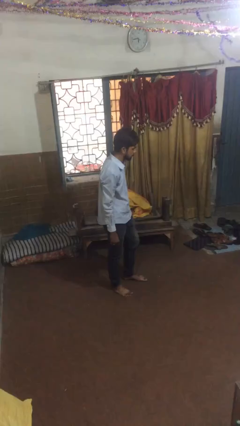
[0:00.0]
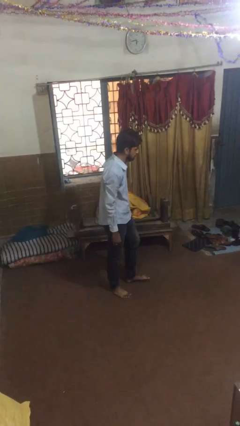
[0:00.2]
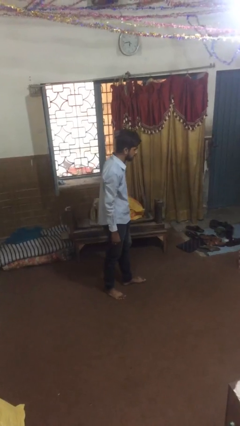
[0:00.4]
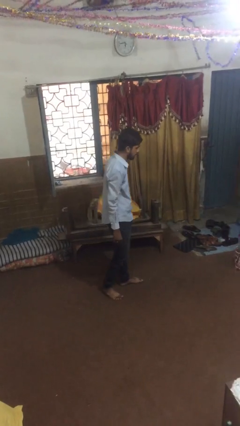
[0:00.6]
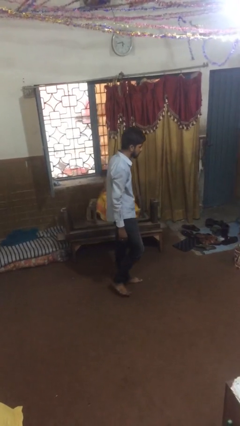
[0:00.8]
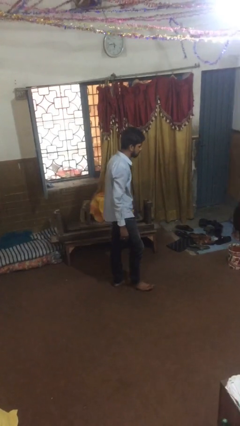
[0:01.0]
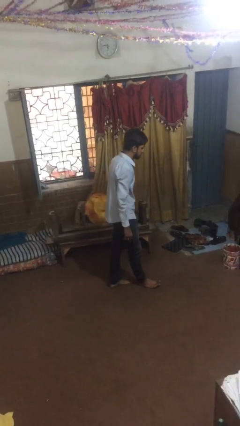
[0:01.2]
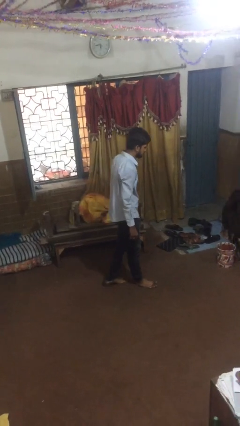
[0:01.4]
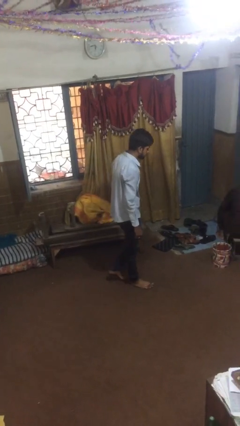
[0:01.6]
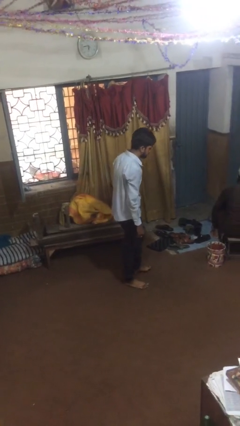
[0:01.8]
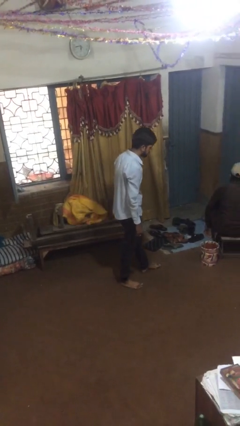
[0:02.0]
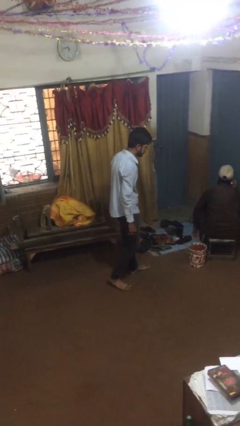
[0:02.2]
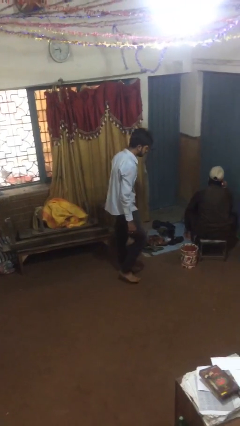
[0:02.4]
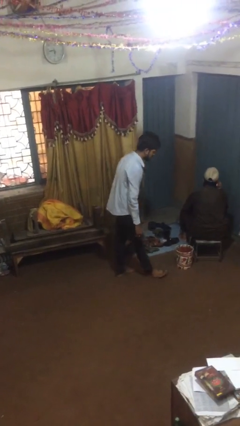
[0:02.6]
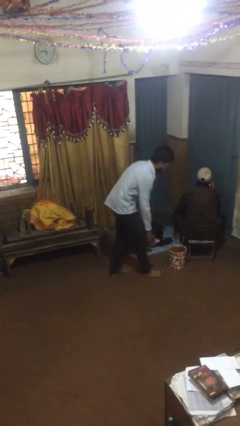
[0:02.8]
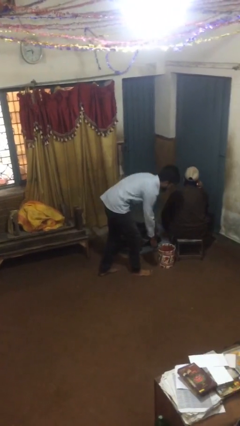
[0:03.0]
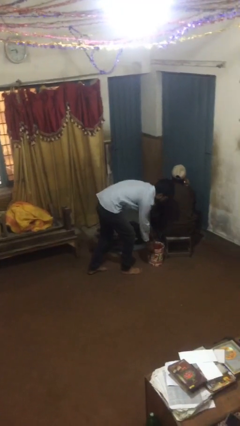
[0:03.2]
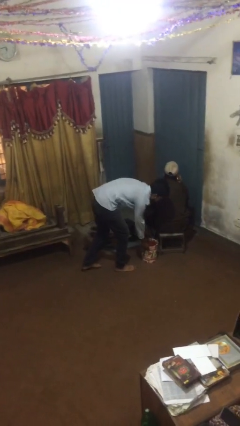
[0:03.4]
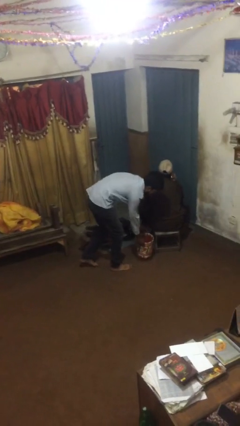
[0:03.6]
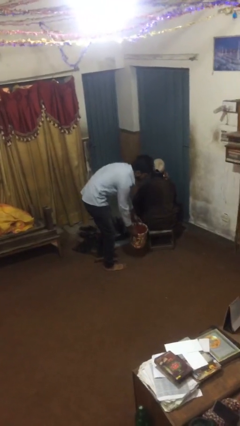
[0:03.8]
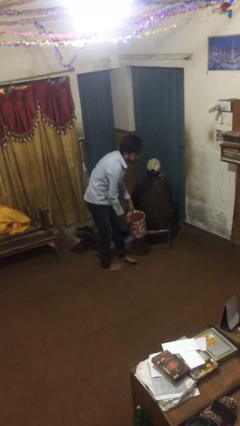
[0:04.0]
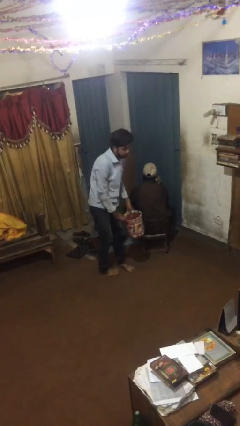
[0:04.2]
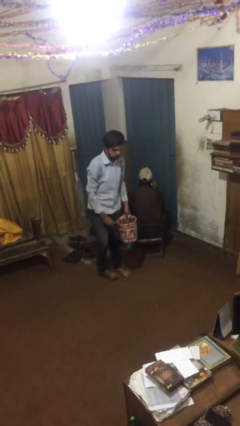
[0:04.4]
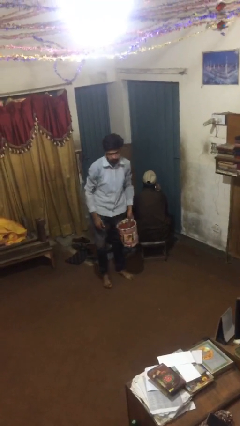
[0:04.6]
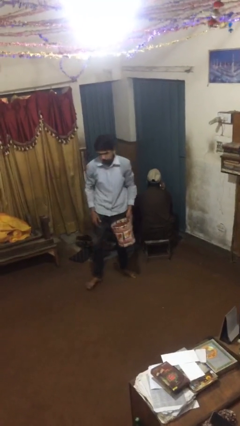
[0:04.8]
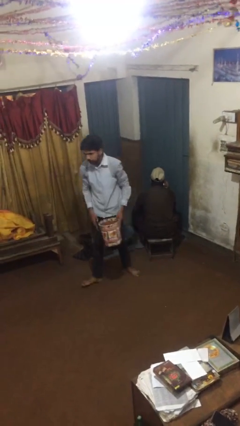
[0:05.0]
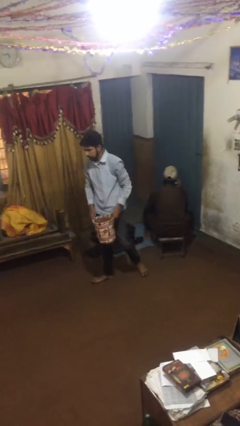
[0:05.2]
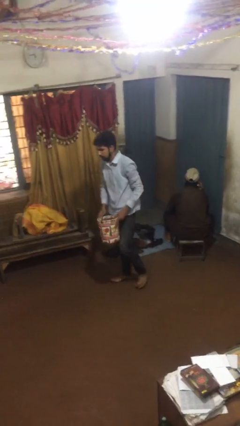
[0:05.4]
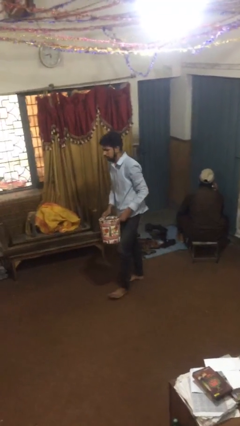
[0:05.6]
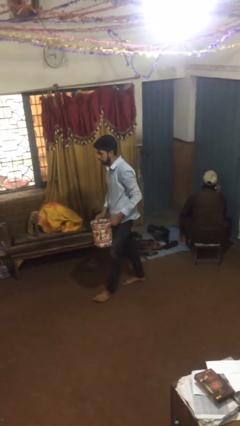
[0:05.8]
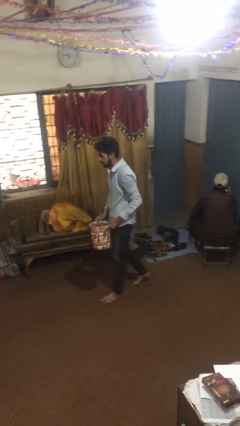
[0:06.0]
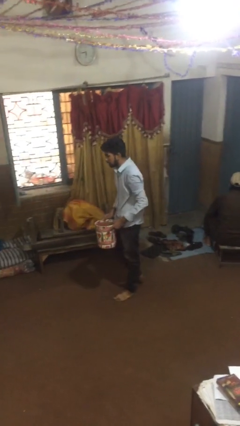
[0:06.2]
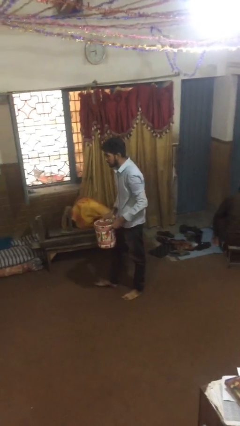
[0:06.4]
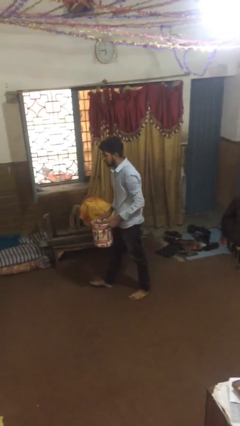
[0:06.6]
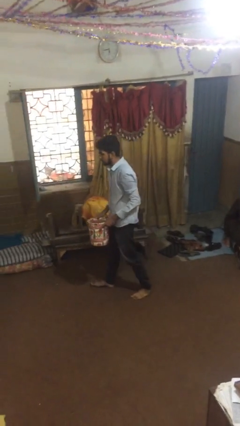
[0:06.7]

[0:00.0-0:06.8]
person steals object from person

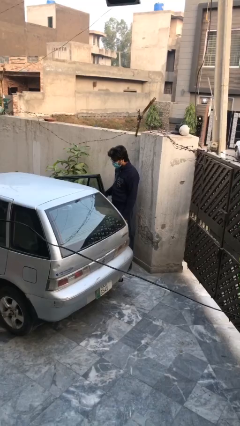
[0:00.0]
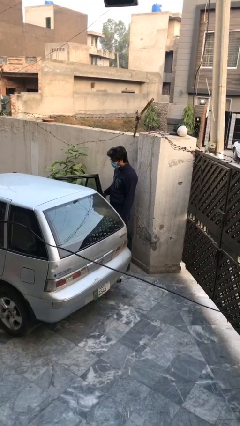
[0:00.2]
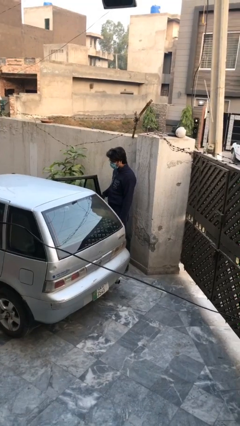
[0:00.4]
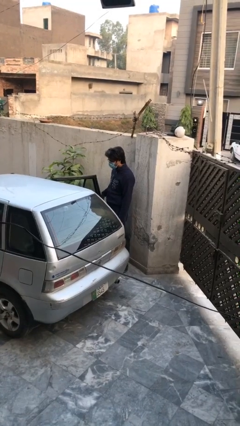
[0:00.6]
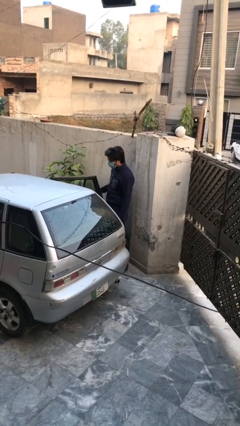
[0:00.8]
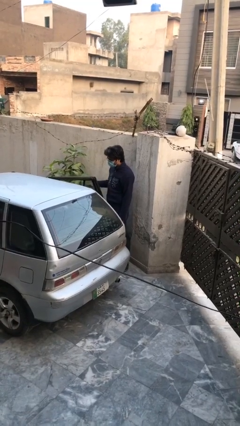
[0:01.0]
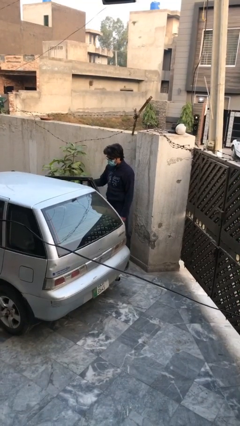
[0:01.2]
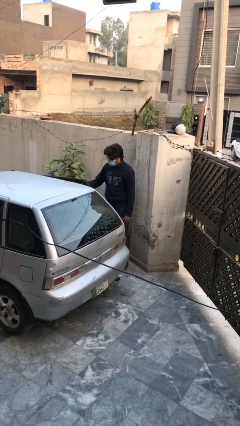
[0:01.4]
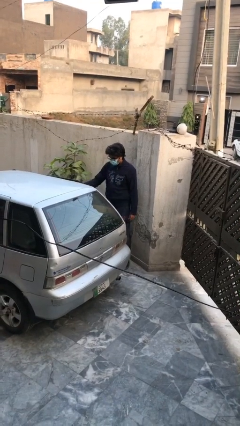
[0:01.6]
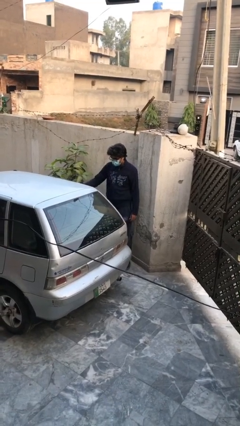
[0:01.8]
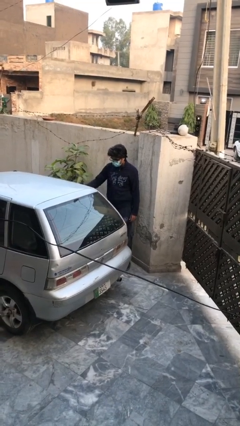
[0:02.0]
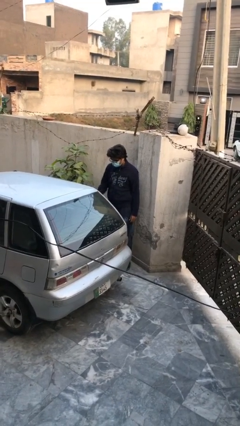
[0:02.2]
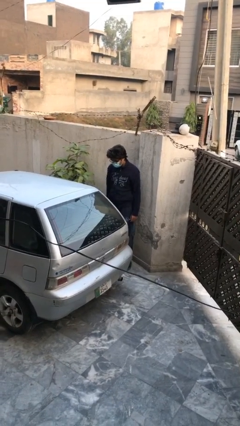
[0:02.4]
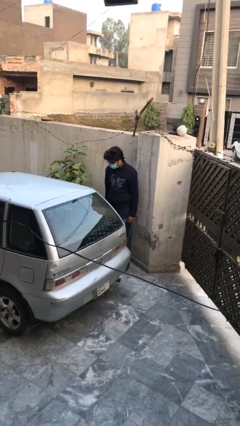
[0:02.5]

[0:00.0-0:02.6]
person closes car door

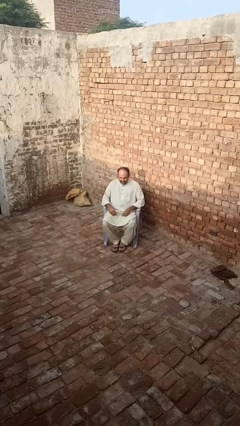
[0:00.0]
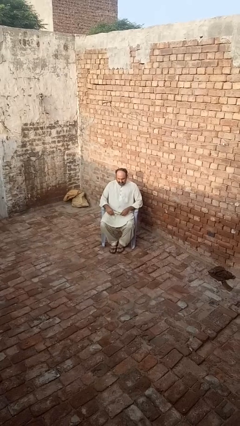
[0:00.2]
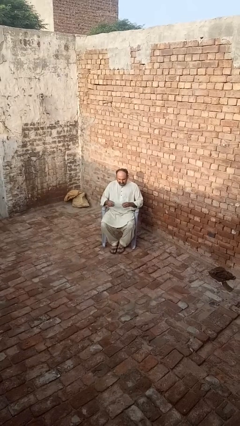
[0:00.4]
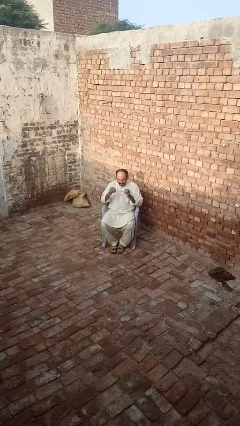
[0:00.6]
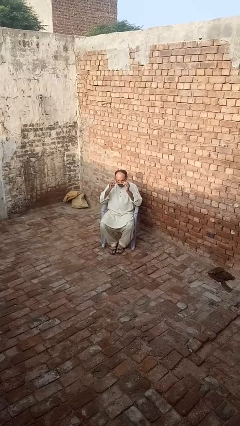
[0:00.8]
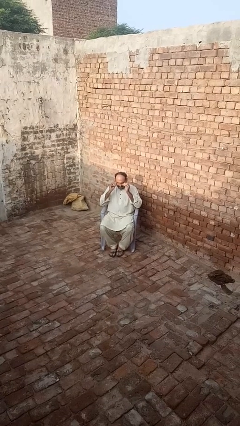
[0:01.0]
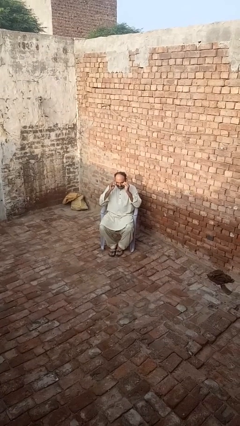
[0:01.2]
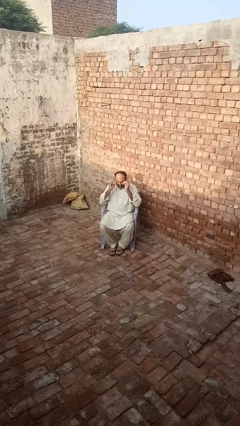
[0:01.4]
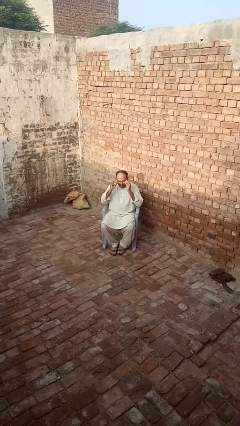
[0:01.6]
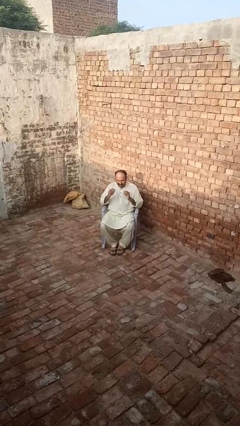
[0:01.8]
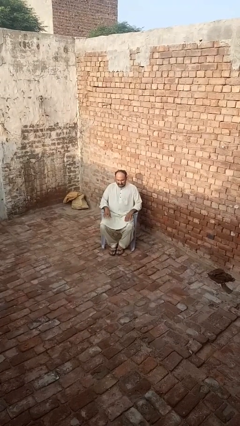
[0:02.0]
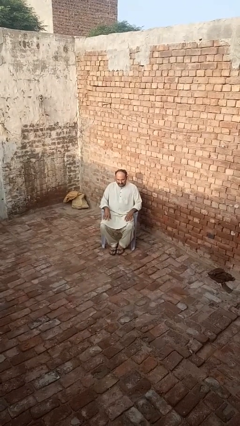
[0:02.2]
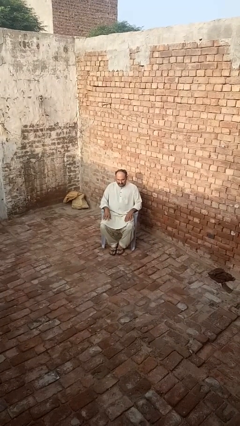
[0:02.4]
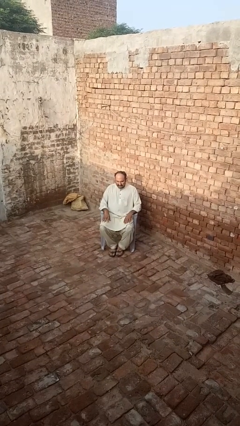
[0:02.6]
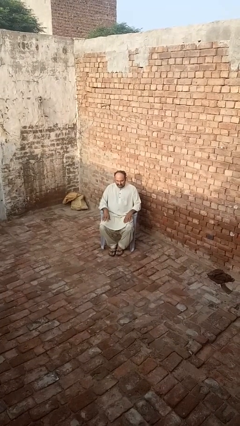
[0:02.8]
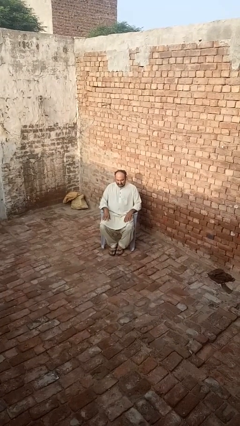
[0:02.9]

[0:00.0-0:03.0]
person puts on glasses

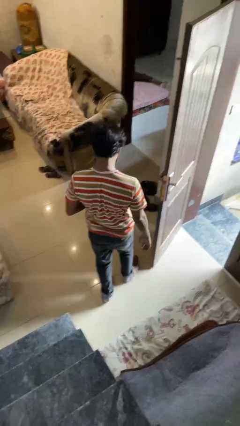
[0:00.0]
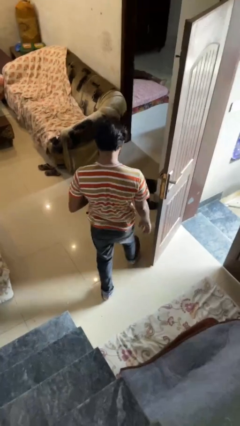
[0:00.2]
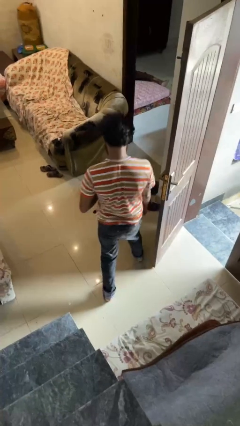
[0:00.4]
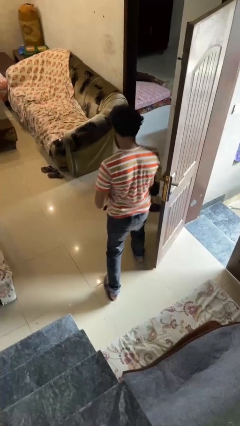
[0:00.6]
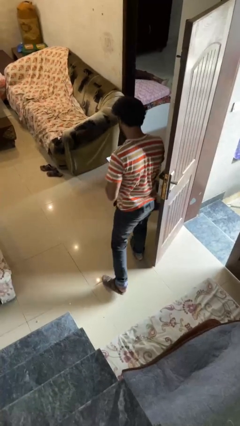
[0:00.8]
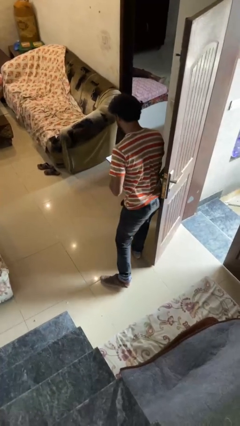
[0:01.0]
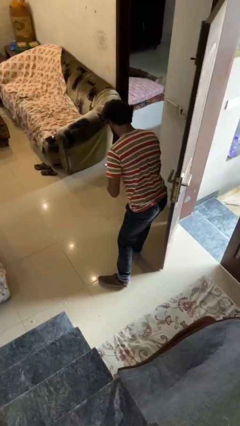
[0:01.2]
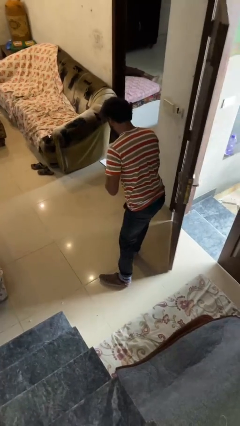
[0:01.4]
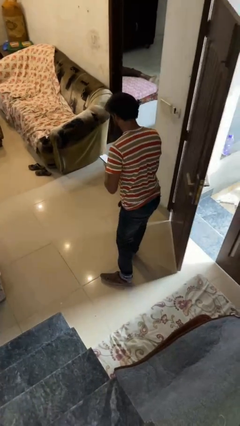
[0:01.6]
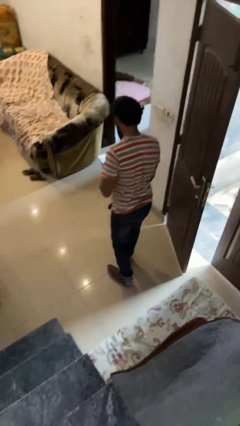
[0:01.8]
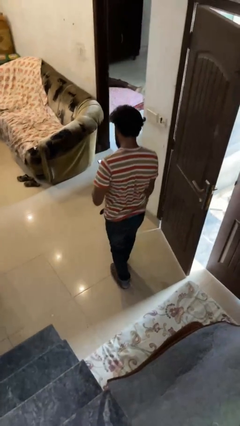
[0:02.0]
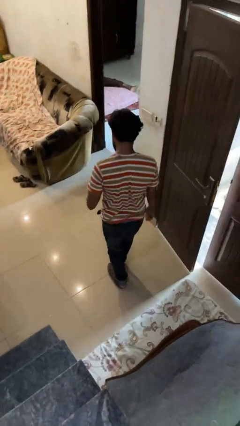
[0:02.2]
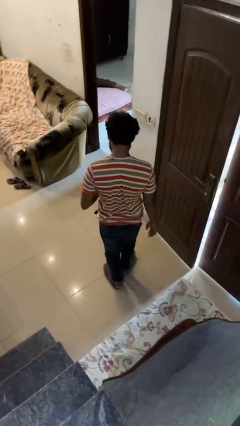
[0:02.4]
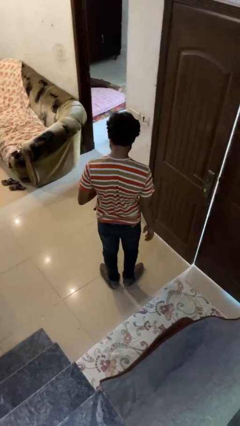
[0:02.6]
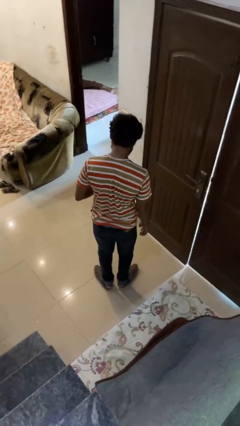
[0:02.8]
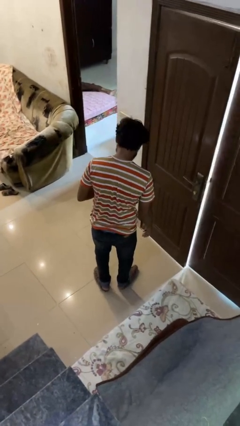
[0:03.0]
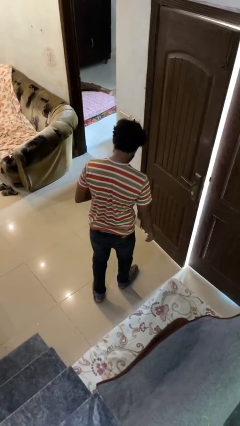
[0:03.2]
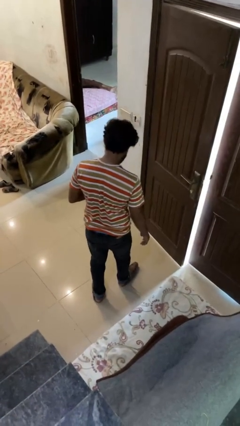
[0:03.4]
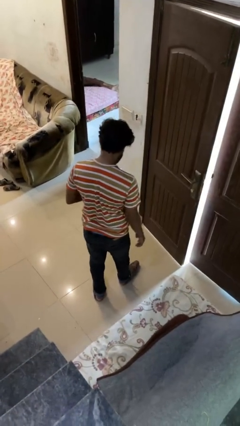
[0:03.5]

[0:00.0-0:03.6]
person closes door with hip

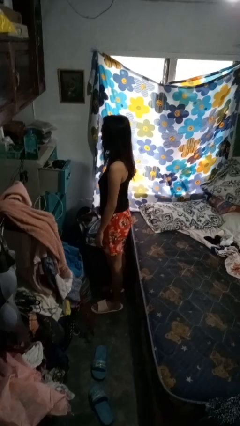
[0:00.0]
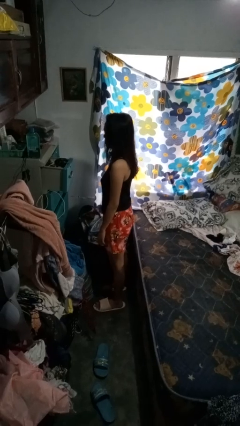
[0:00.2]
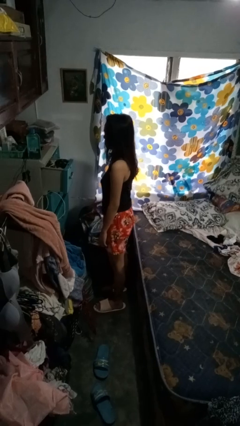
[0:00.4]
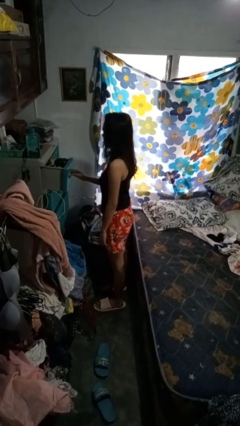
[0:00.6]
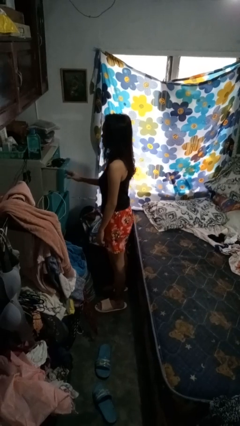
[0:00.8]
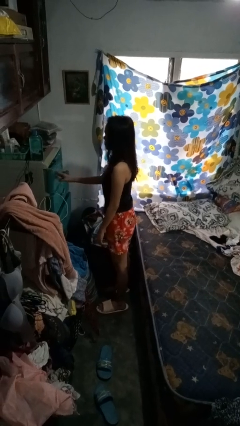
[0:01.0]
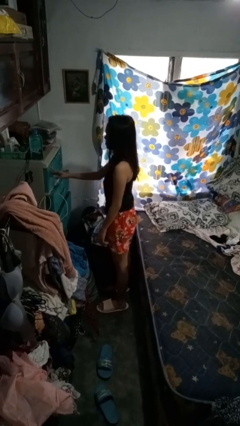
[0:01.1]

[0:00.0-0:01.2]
person closes dresser drawer

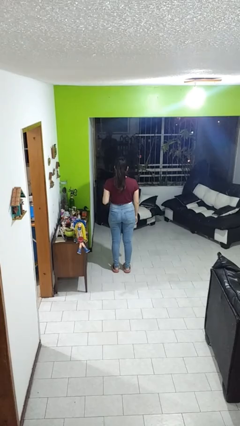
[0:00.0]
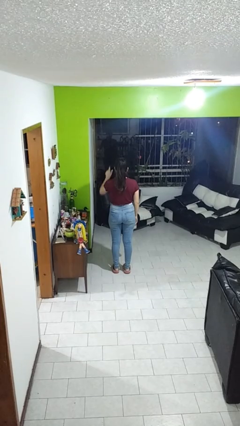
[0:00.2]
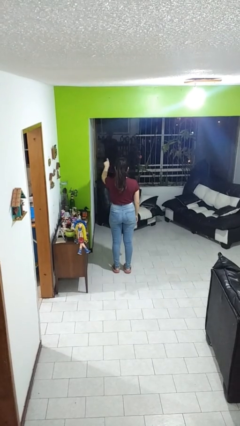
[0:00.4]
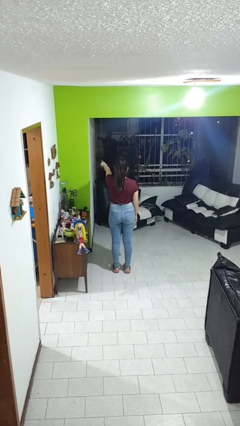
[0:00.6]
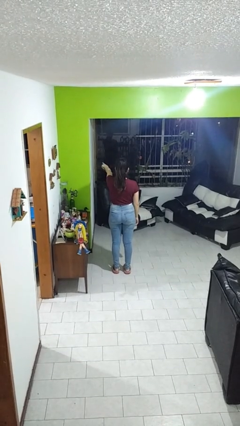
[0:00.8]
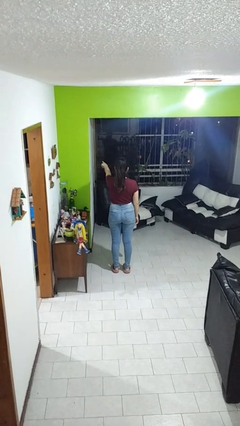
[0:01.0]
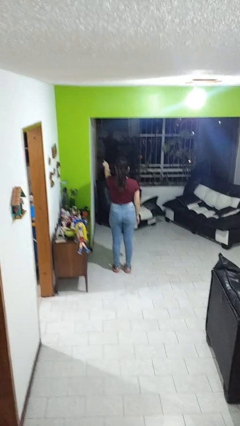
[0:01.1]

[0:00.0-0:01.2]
person points at person
